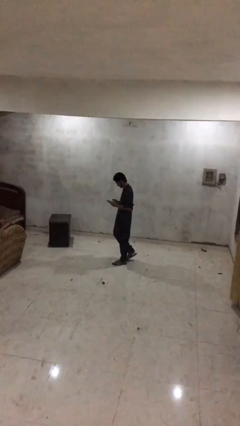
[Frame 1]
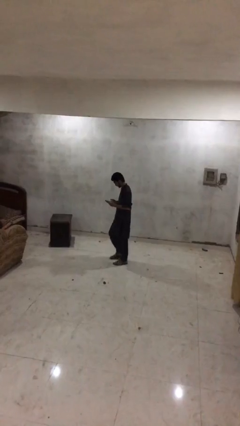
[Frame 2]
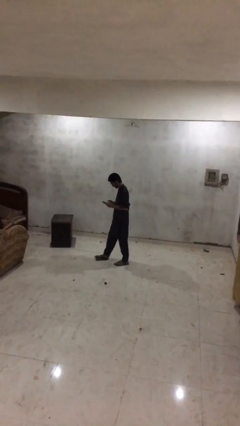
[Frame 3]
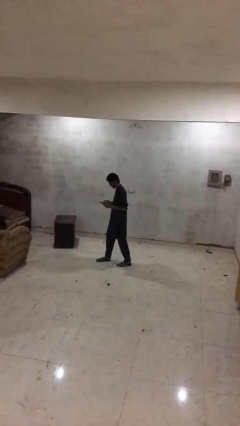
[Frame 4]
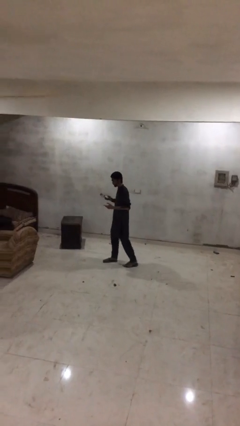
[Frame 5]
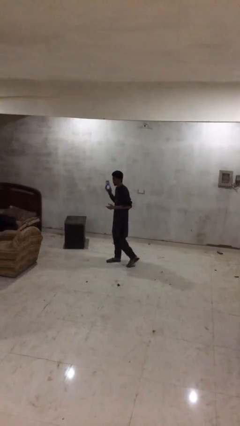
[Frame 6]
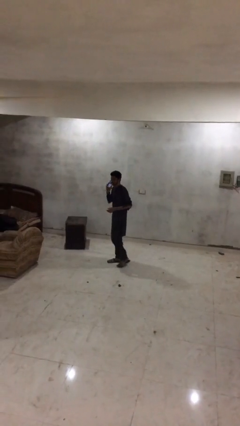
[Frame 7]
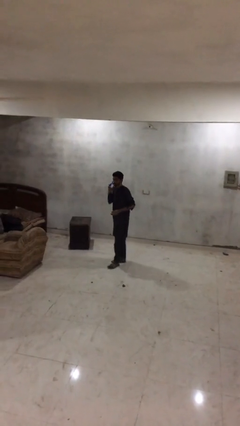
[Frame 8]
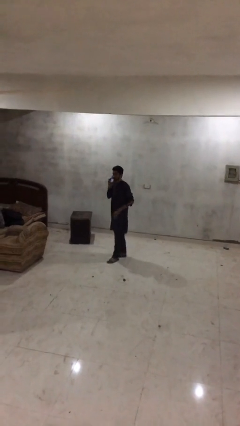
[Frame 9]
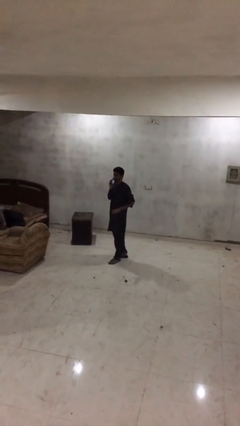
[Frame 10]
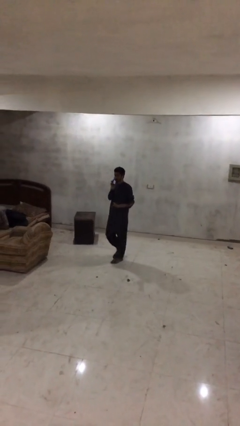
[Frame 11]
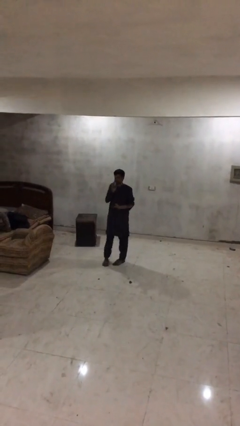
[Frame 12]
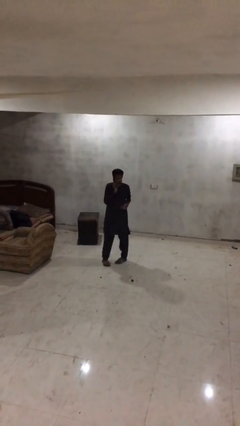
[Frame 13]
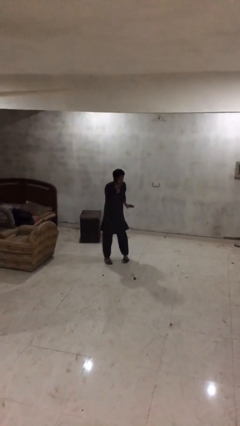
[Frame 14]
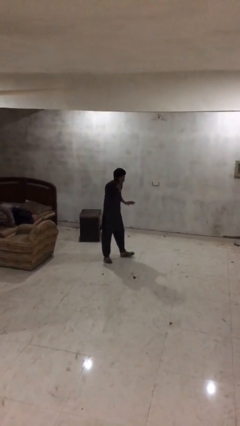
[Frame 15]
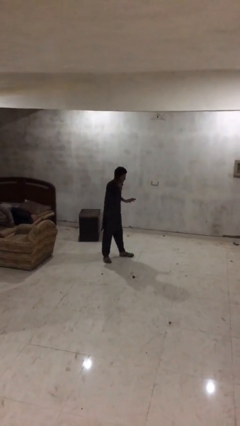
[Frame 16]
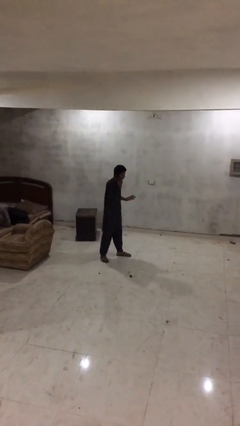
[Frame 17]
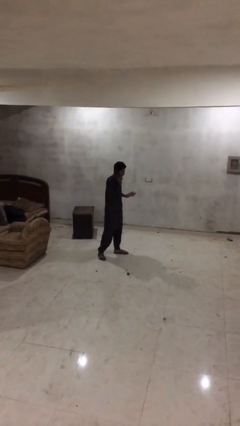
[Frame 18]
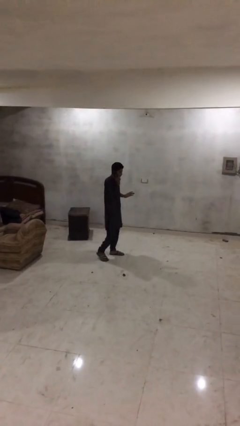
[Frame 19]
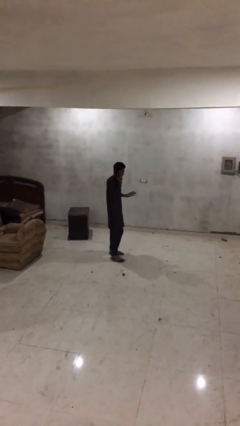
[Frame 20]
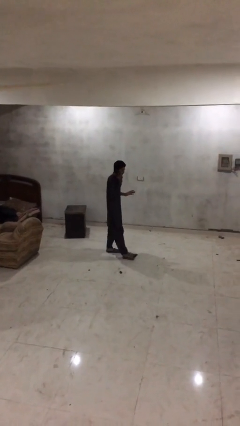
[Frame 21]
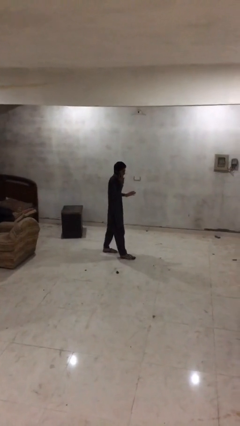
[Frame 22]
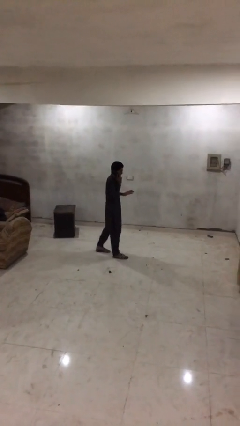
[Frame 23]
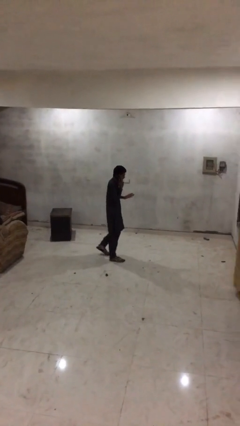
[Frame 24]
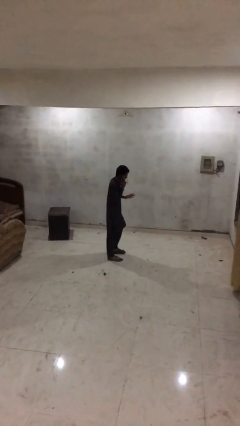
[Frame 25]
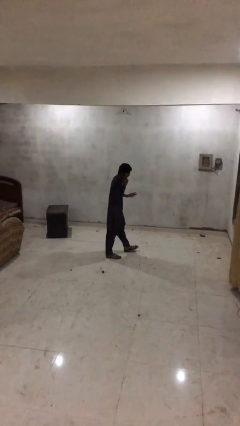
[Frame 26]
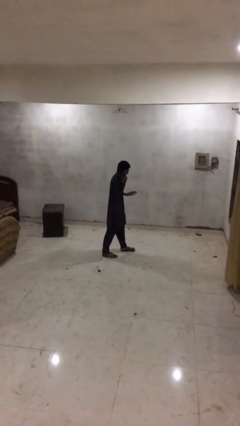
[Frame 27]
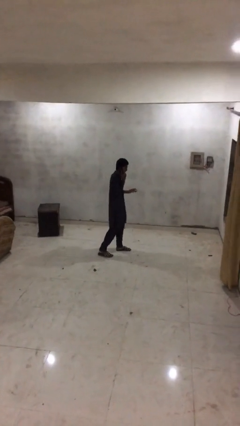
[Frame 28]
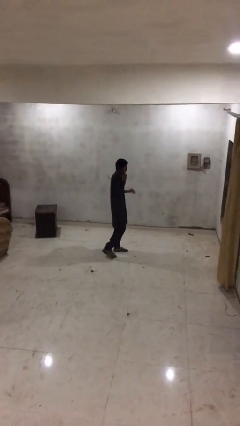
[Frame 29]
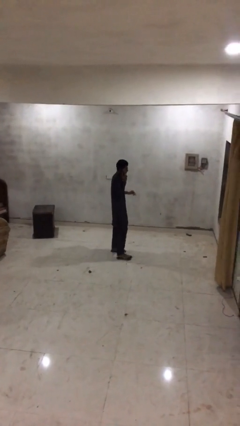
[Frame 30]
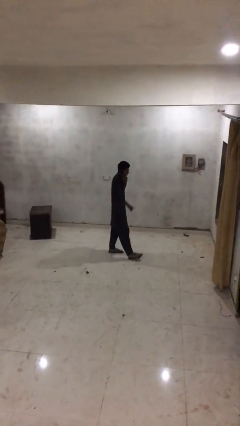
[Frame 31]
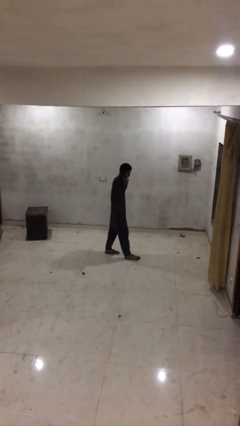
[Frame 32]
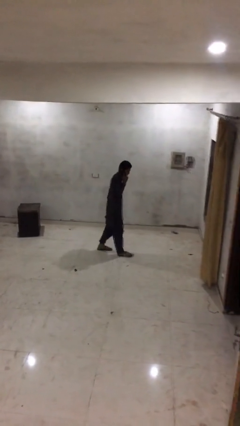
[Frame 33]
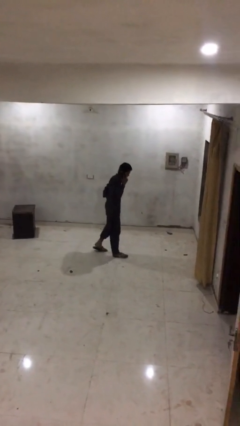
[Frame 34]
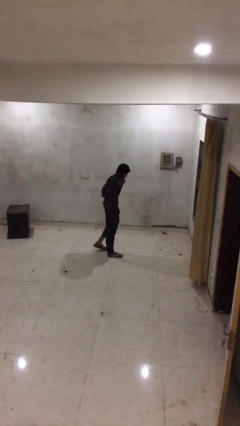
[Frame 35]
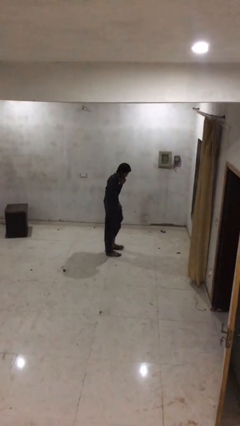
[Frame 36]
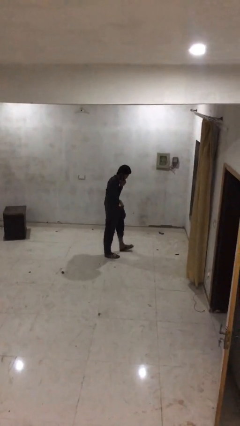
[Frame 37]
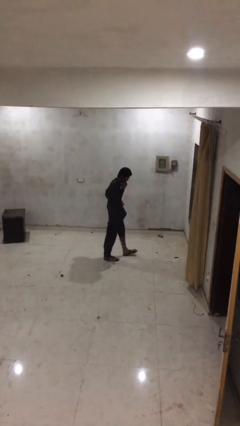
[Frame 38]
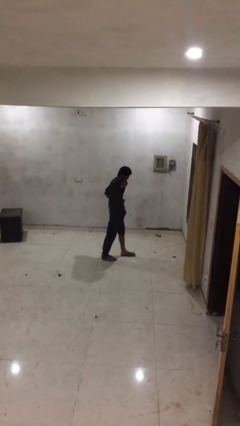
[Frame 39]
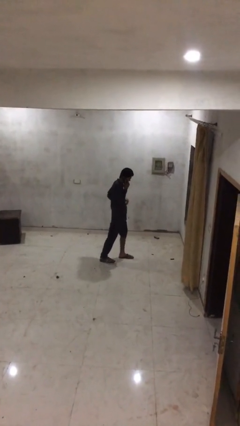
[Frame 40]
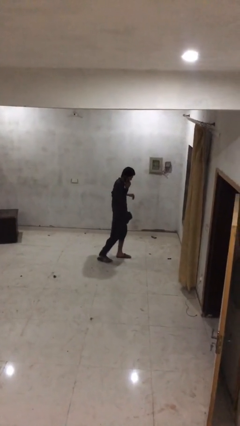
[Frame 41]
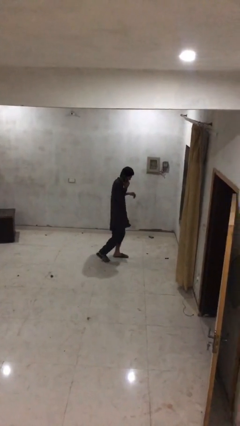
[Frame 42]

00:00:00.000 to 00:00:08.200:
person talks on phone

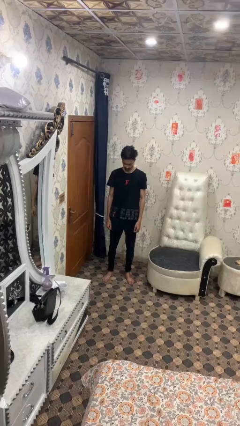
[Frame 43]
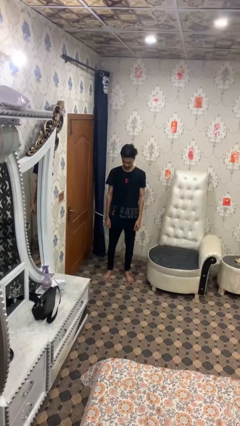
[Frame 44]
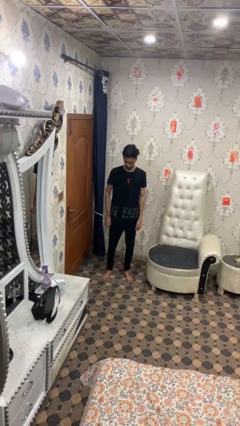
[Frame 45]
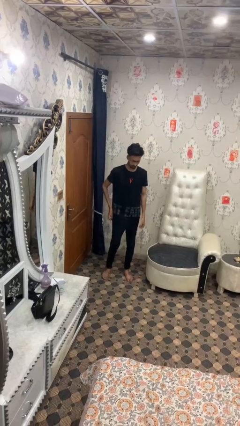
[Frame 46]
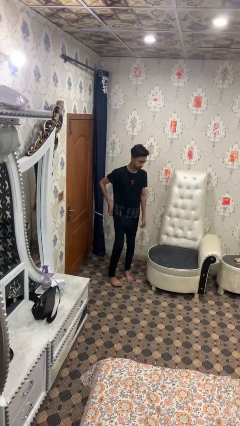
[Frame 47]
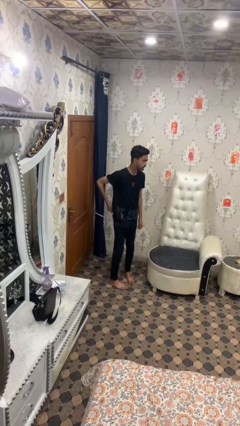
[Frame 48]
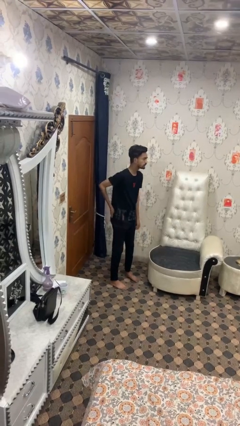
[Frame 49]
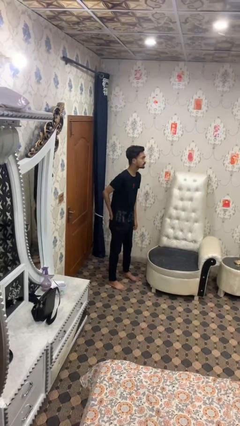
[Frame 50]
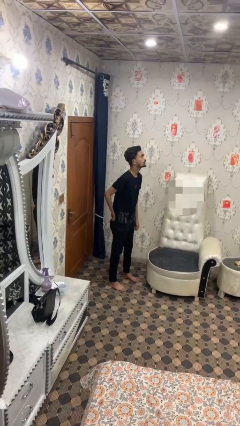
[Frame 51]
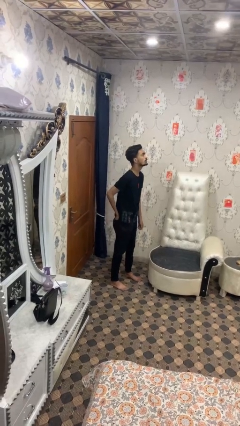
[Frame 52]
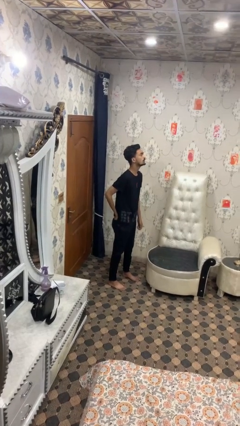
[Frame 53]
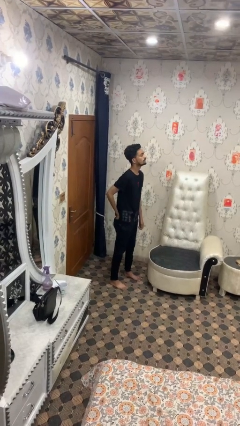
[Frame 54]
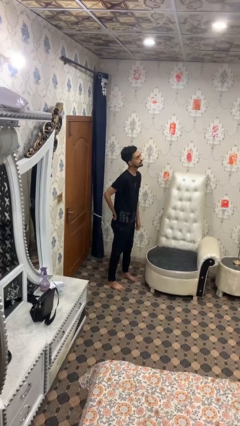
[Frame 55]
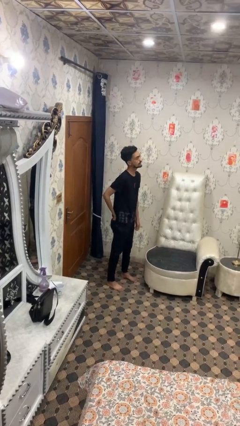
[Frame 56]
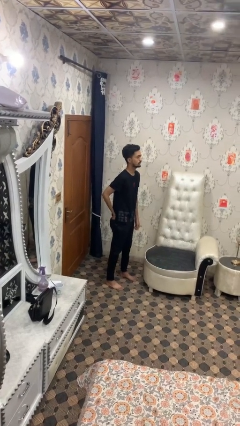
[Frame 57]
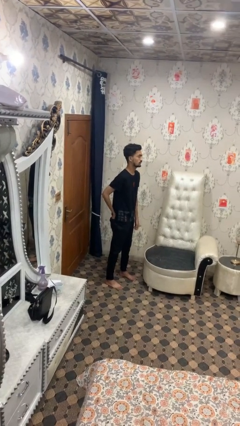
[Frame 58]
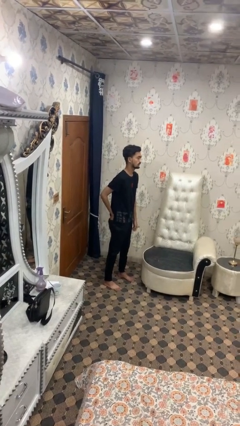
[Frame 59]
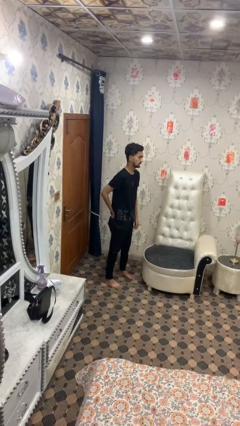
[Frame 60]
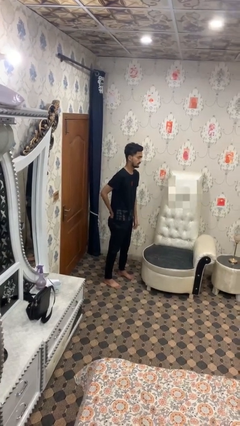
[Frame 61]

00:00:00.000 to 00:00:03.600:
person puts hands in back pockets

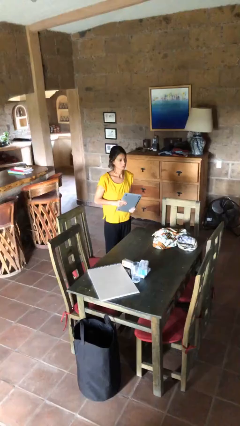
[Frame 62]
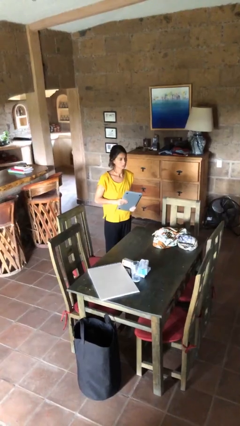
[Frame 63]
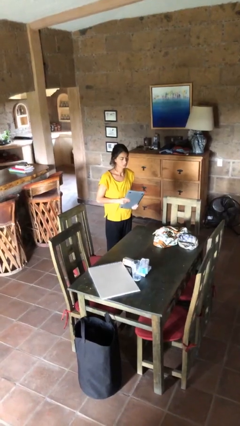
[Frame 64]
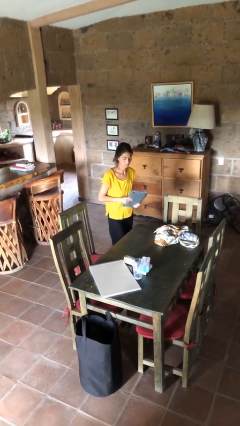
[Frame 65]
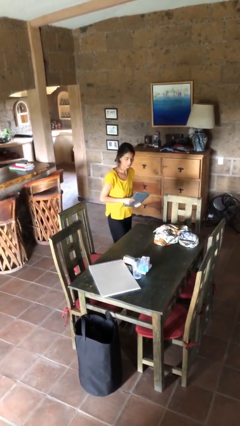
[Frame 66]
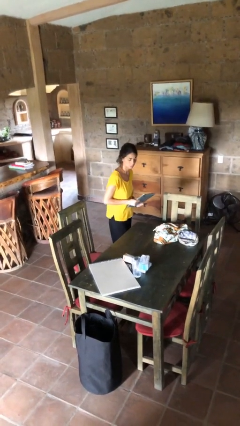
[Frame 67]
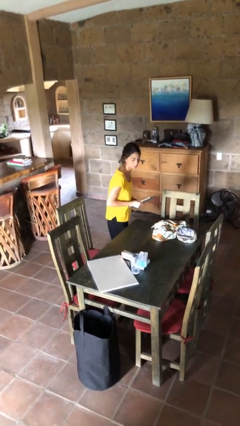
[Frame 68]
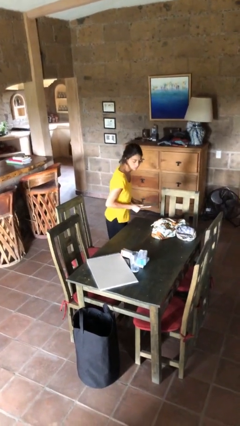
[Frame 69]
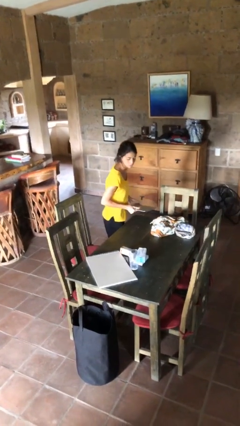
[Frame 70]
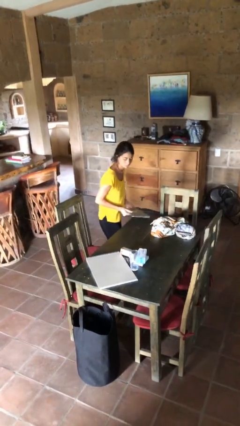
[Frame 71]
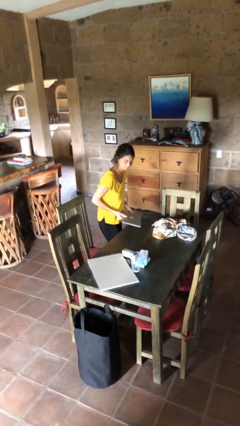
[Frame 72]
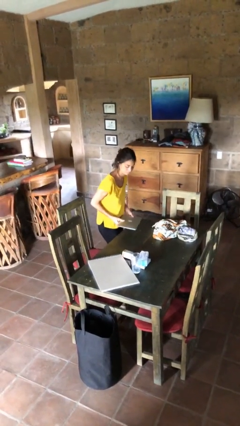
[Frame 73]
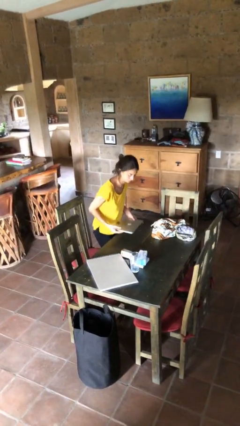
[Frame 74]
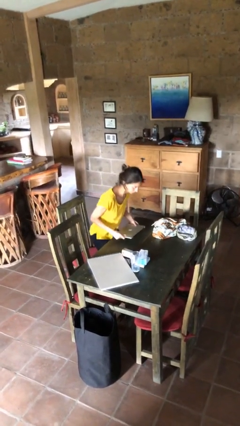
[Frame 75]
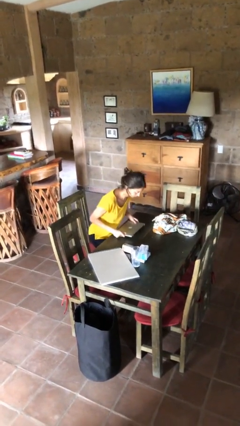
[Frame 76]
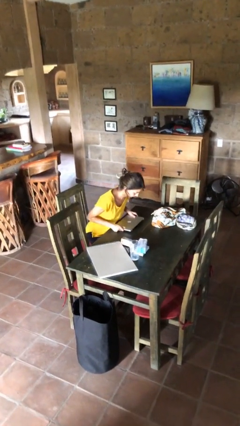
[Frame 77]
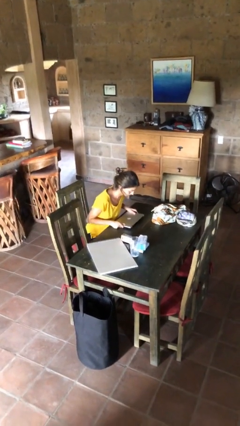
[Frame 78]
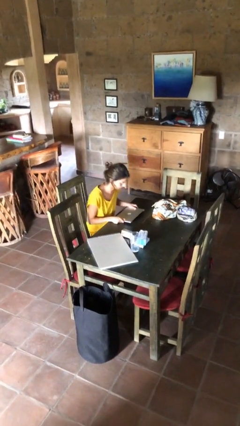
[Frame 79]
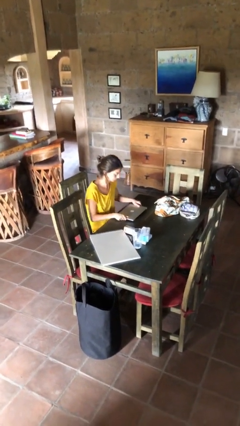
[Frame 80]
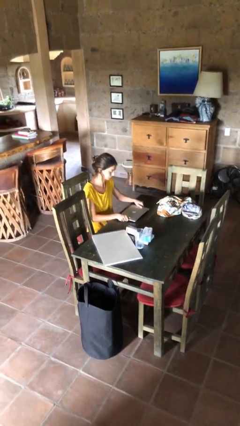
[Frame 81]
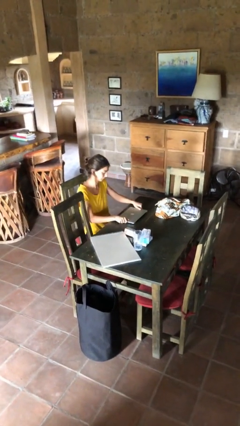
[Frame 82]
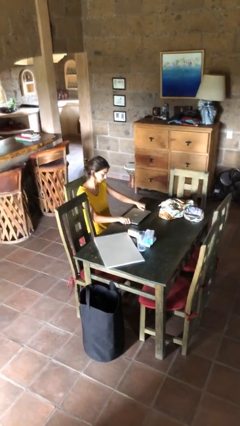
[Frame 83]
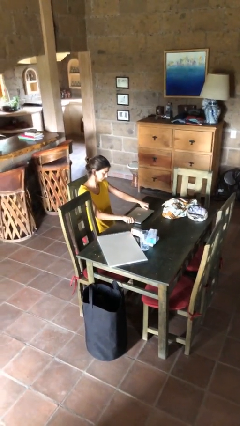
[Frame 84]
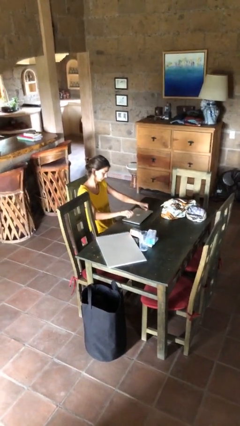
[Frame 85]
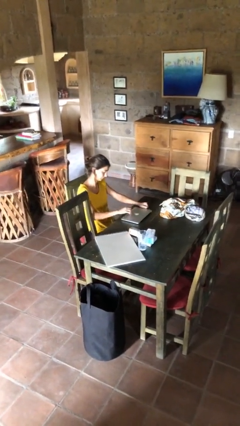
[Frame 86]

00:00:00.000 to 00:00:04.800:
person sits down

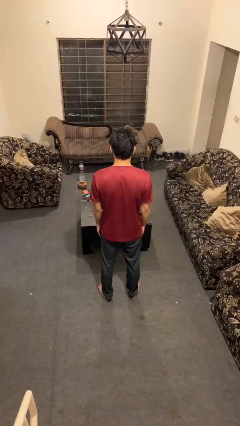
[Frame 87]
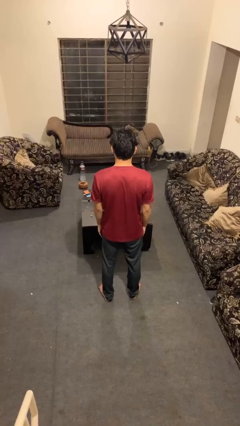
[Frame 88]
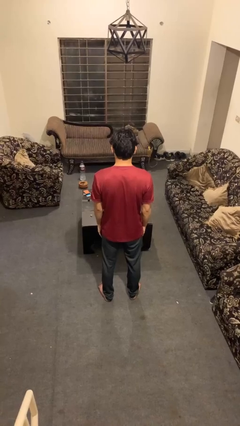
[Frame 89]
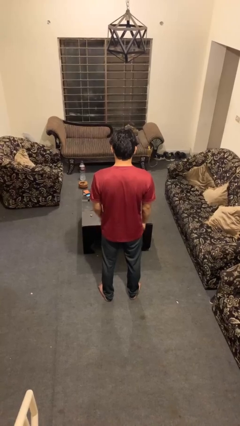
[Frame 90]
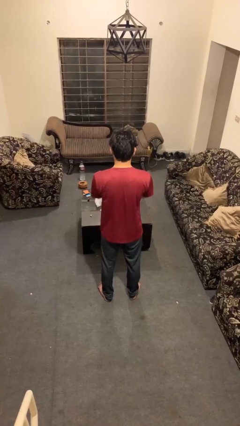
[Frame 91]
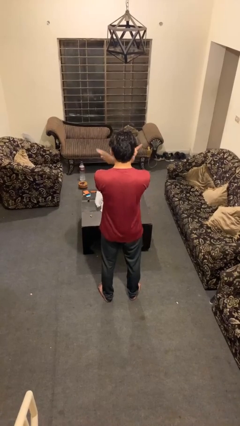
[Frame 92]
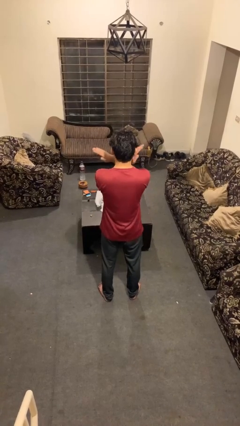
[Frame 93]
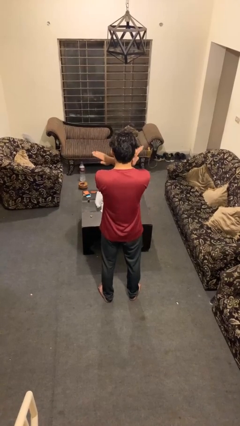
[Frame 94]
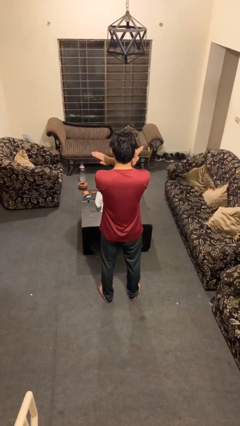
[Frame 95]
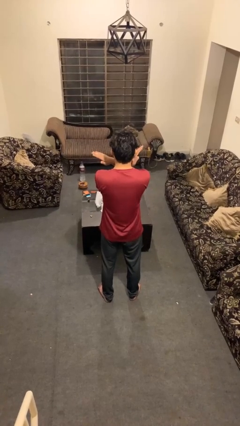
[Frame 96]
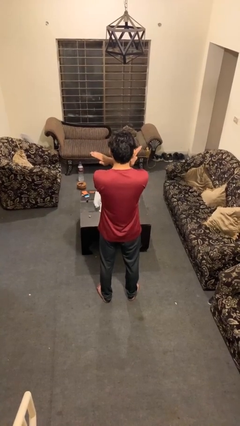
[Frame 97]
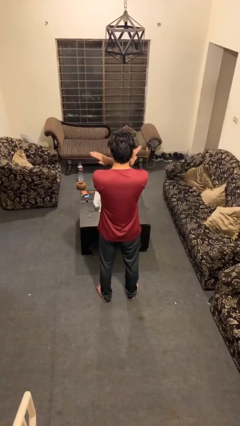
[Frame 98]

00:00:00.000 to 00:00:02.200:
person gestures arms x
